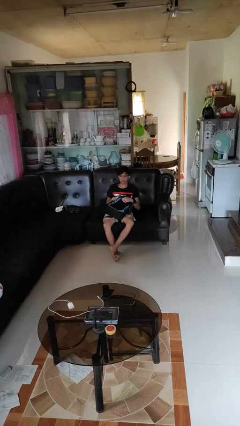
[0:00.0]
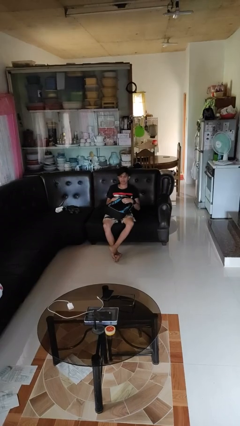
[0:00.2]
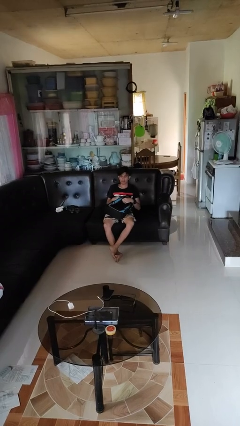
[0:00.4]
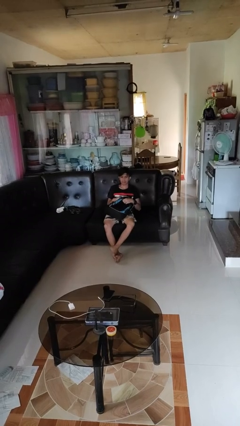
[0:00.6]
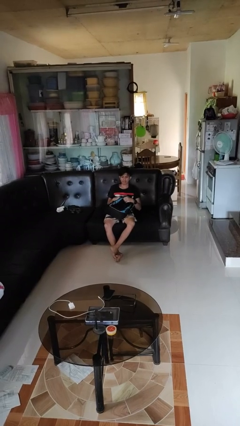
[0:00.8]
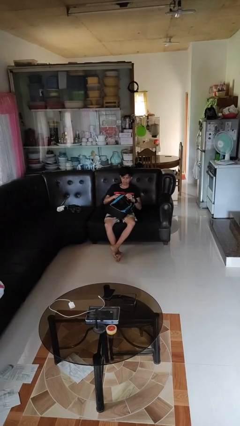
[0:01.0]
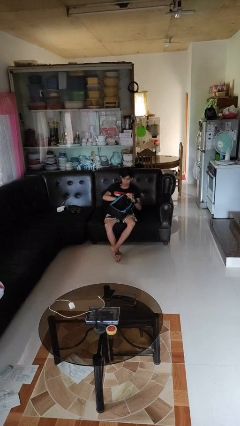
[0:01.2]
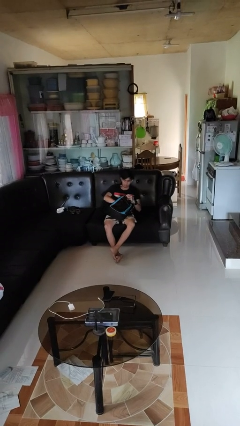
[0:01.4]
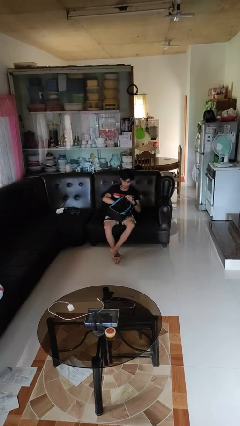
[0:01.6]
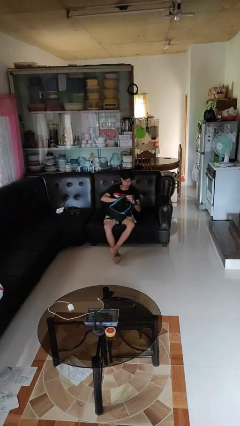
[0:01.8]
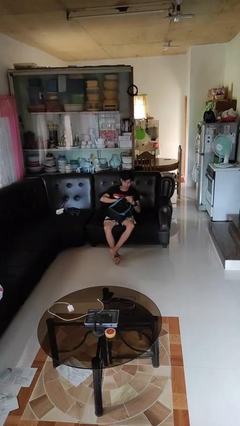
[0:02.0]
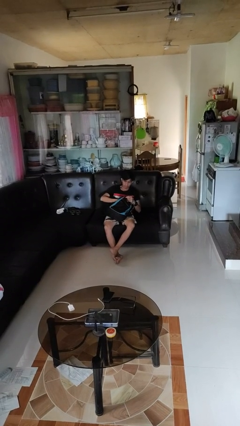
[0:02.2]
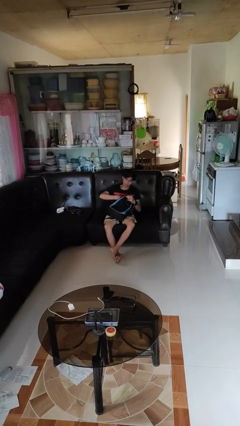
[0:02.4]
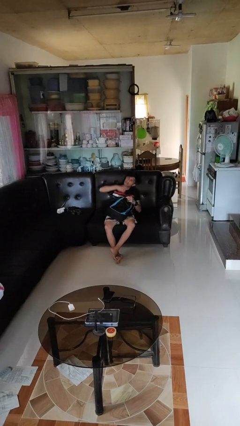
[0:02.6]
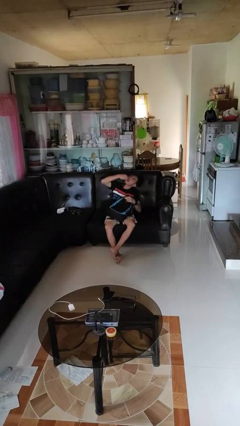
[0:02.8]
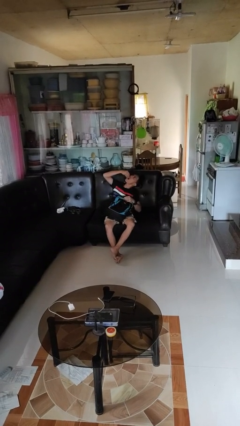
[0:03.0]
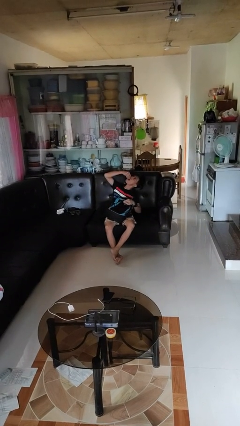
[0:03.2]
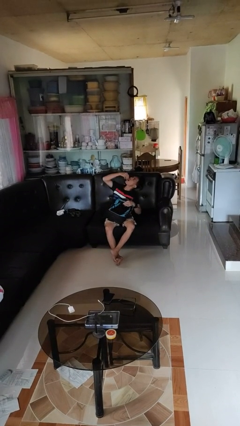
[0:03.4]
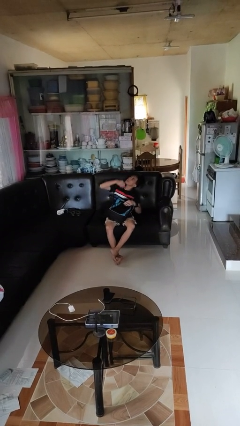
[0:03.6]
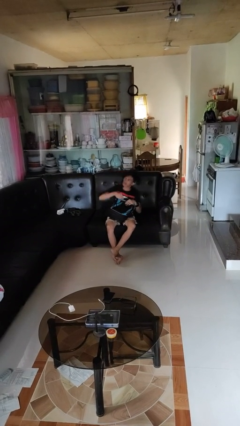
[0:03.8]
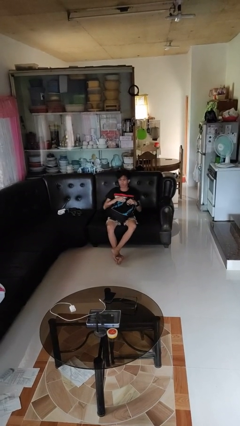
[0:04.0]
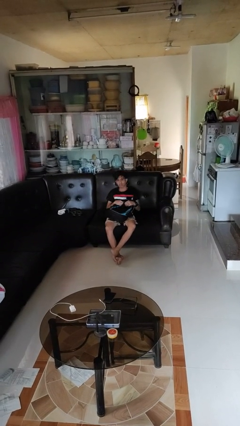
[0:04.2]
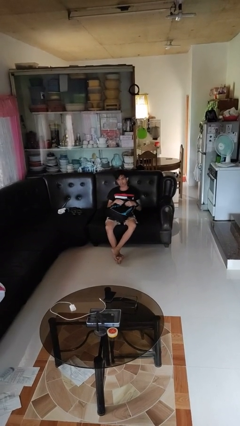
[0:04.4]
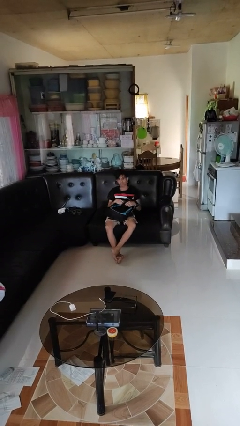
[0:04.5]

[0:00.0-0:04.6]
person eats snack from bag

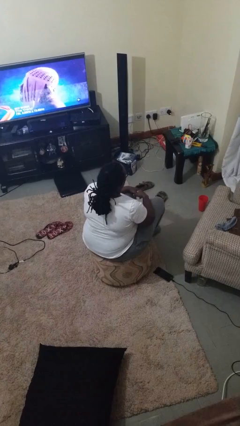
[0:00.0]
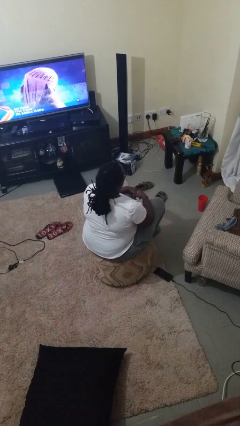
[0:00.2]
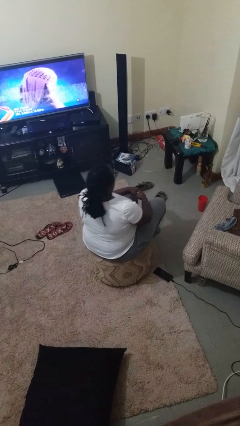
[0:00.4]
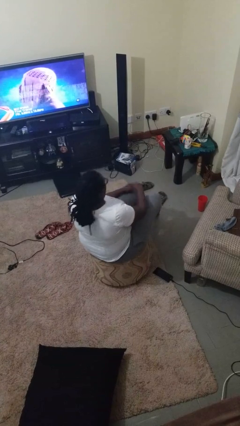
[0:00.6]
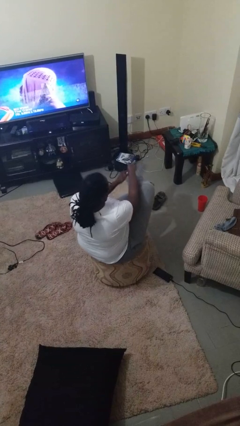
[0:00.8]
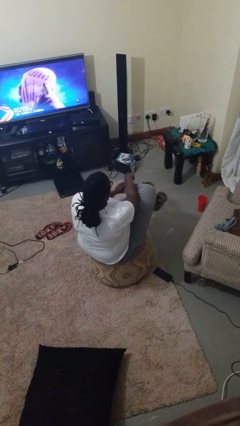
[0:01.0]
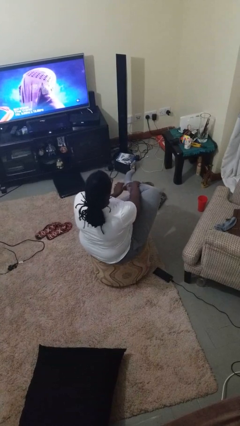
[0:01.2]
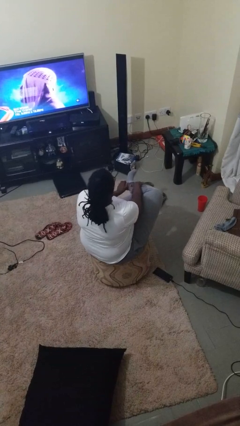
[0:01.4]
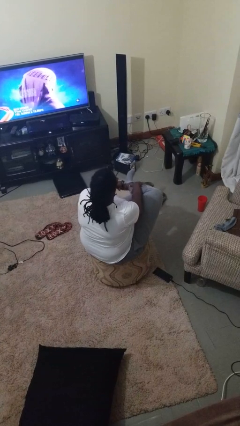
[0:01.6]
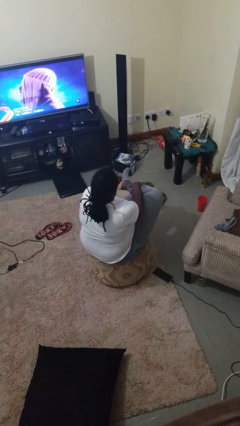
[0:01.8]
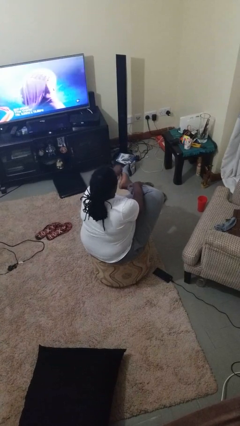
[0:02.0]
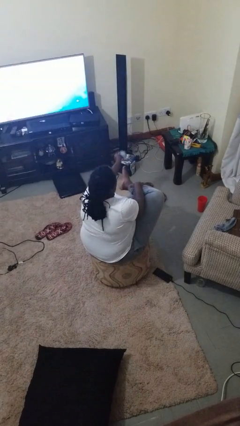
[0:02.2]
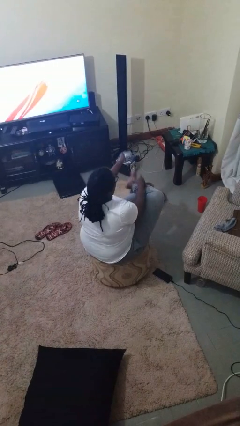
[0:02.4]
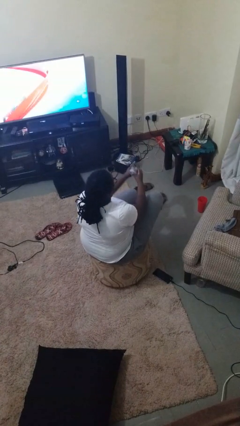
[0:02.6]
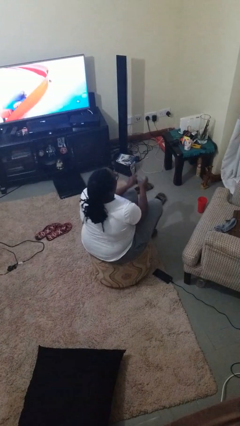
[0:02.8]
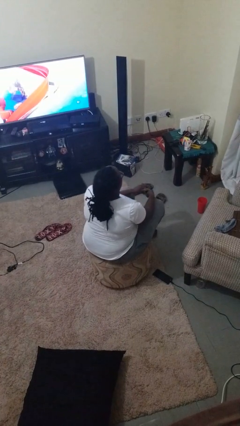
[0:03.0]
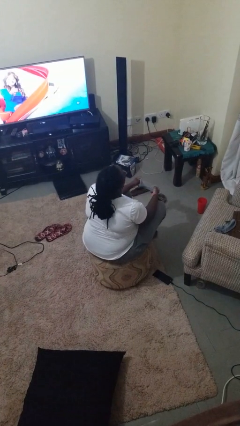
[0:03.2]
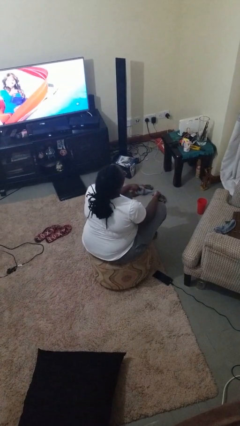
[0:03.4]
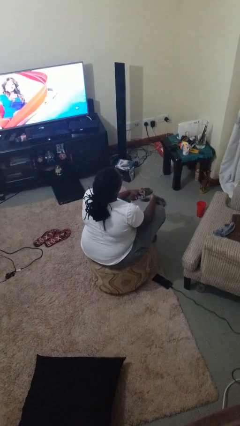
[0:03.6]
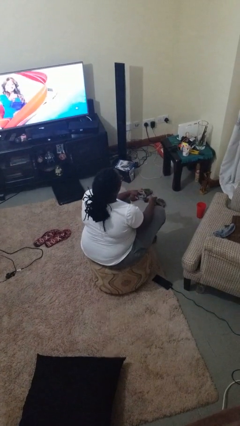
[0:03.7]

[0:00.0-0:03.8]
person takes off socks

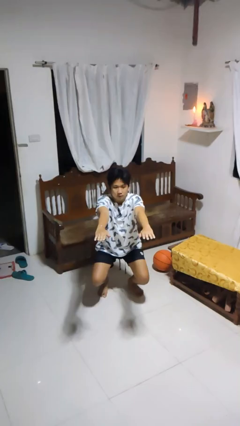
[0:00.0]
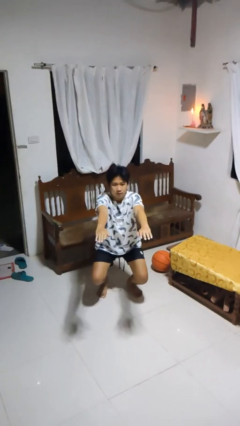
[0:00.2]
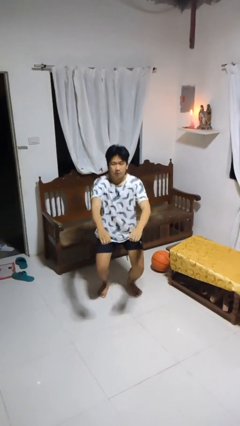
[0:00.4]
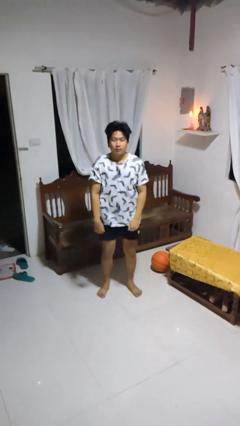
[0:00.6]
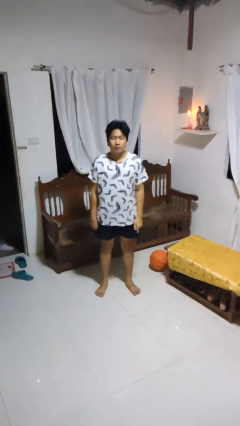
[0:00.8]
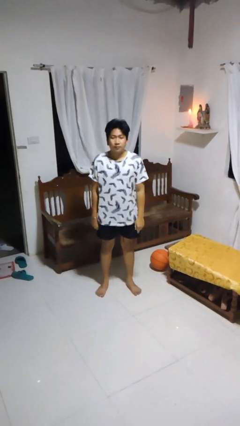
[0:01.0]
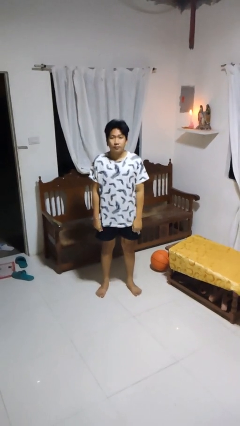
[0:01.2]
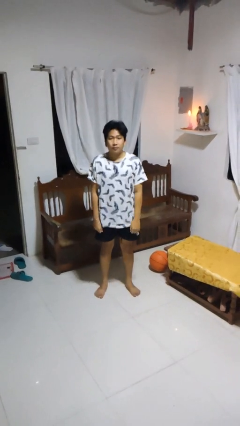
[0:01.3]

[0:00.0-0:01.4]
person stands up

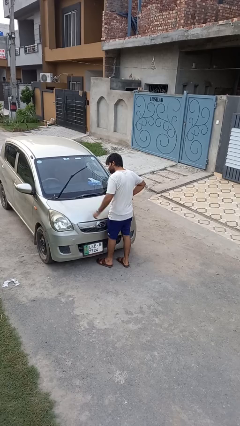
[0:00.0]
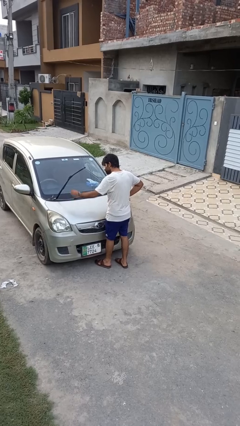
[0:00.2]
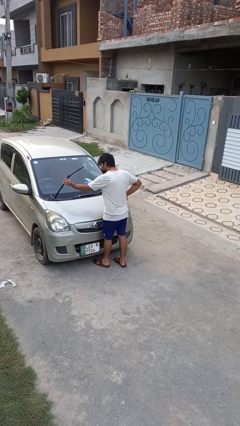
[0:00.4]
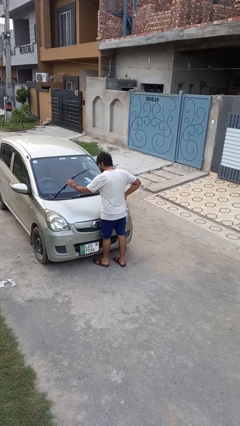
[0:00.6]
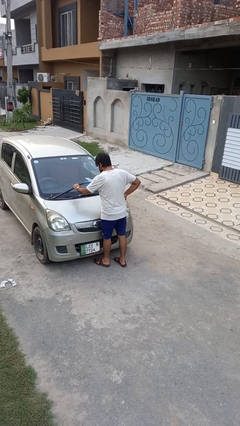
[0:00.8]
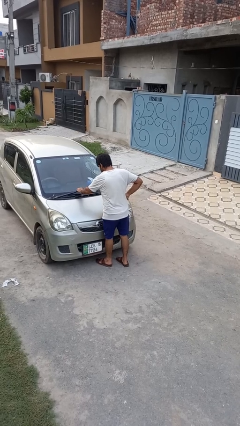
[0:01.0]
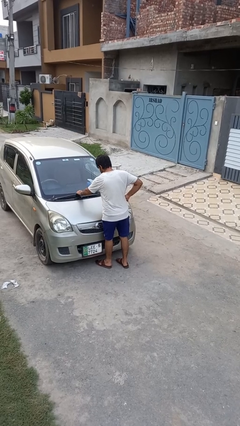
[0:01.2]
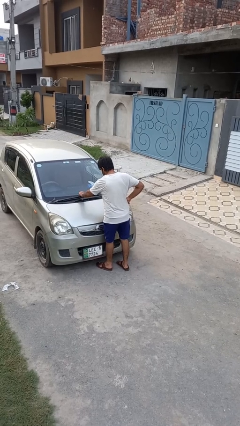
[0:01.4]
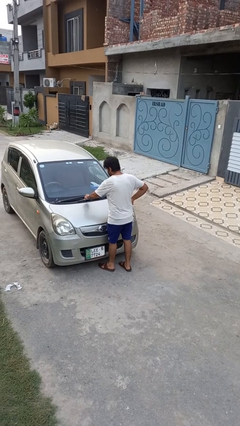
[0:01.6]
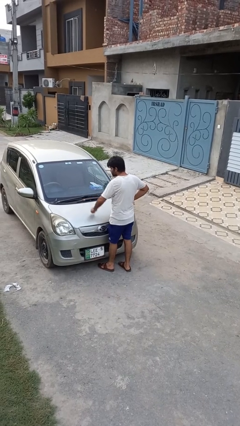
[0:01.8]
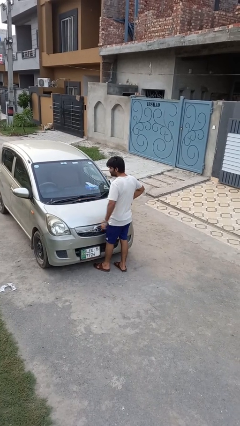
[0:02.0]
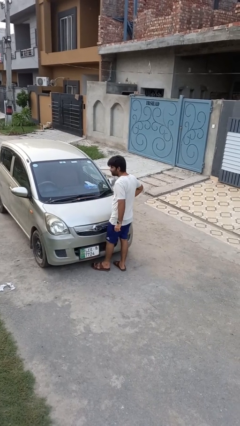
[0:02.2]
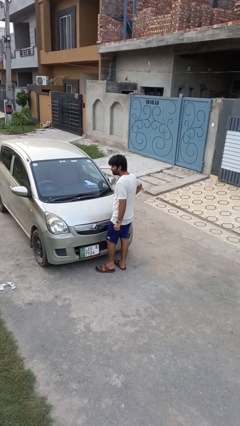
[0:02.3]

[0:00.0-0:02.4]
person flips down car wipers

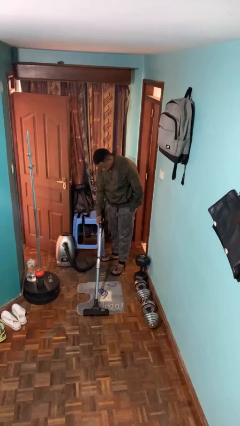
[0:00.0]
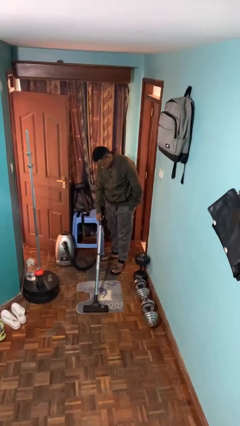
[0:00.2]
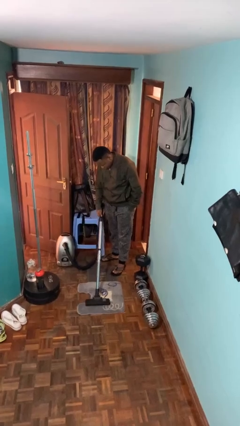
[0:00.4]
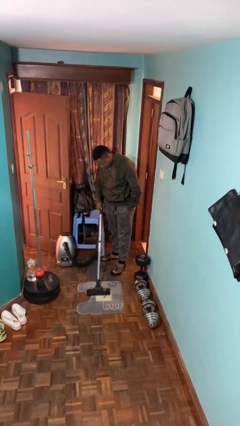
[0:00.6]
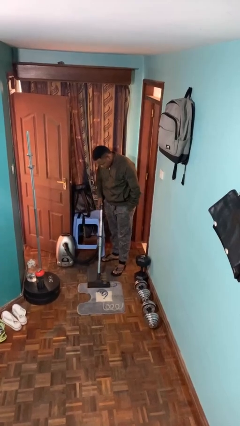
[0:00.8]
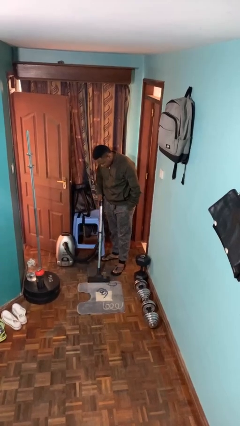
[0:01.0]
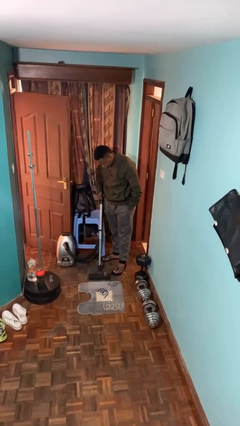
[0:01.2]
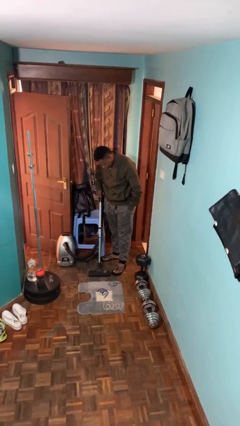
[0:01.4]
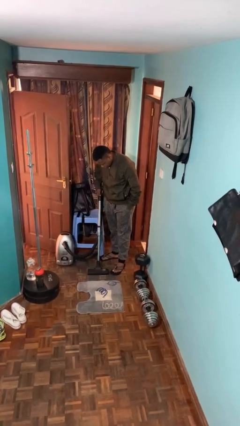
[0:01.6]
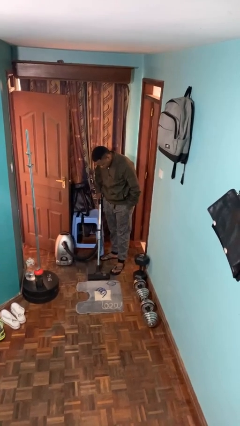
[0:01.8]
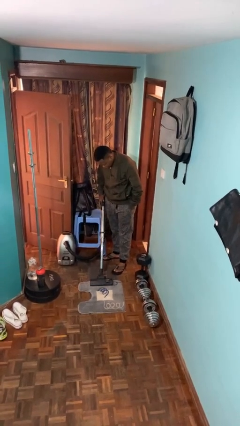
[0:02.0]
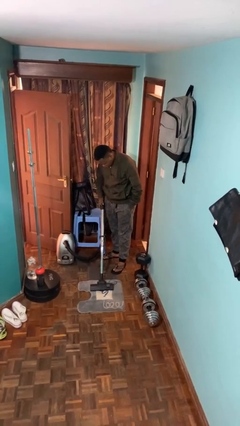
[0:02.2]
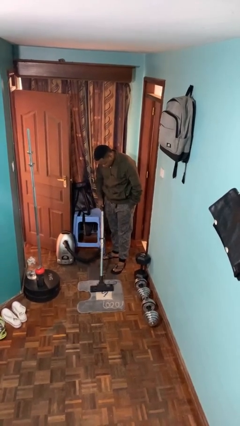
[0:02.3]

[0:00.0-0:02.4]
person vacuums carpet

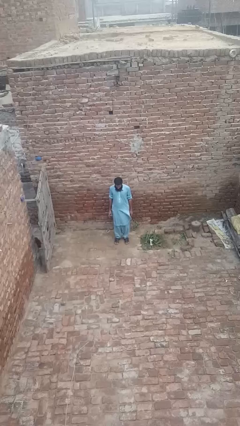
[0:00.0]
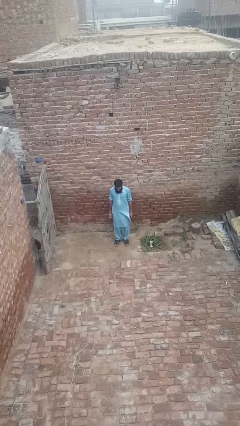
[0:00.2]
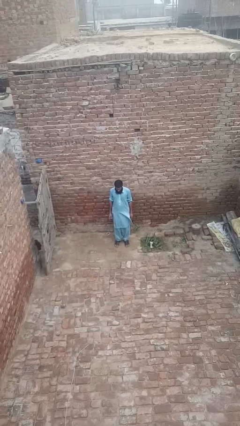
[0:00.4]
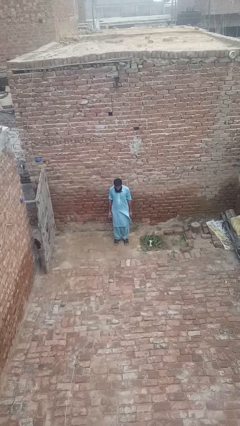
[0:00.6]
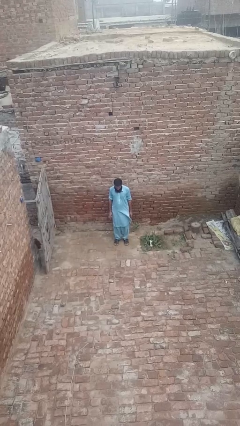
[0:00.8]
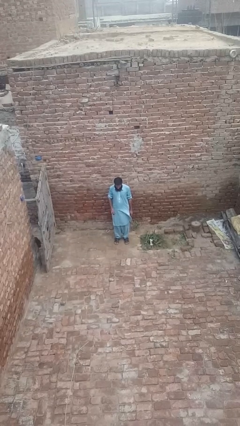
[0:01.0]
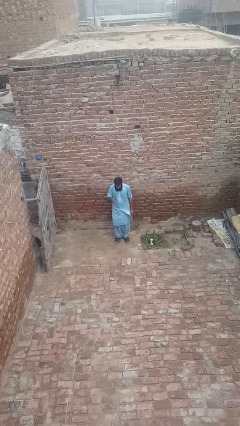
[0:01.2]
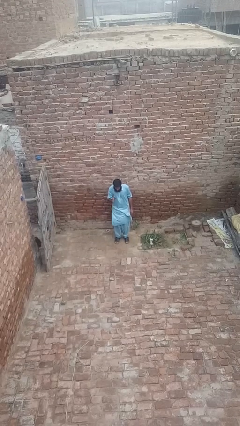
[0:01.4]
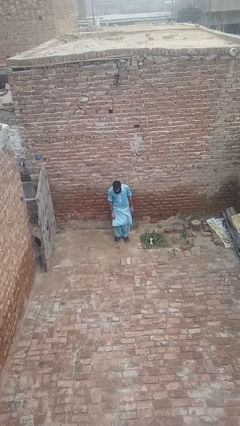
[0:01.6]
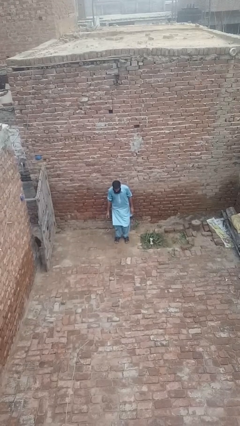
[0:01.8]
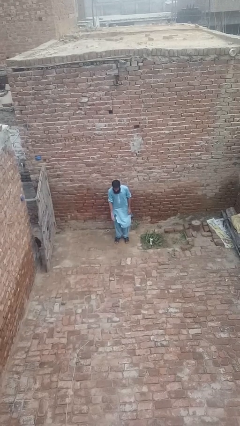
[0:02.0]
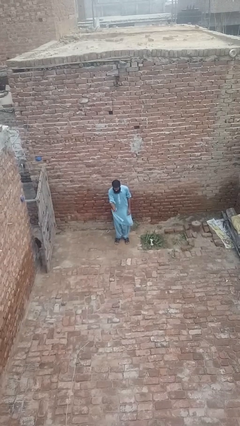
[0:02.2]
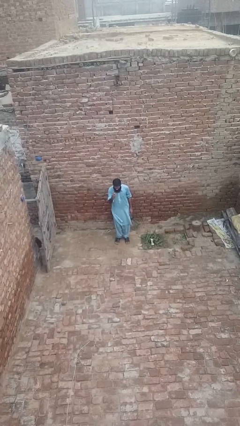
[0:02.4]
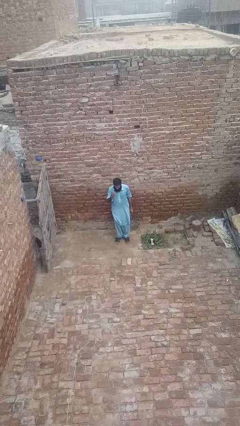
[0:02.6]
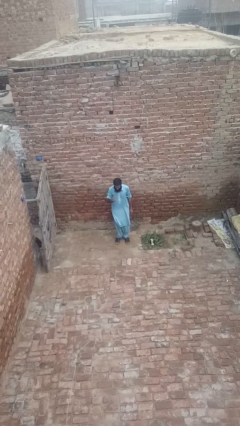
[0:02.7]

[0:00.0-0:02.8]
person bounces ball on floor
